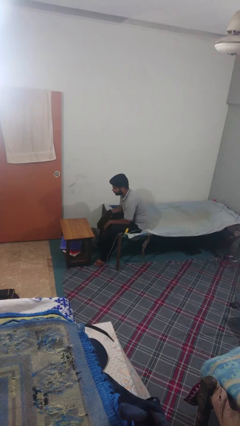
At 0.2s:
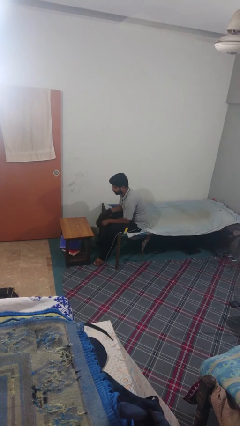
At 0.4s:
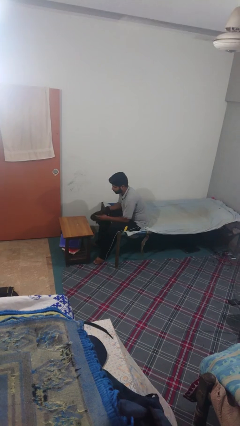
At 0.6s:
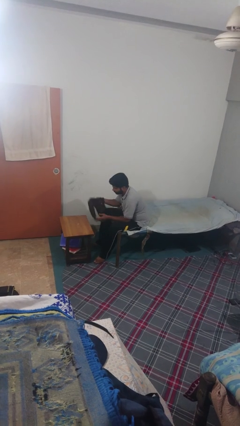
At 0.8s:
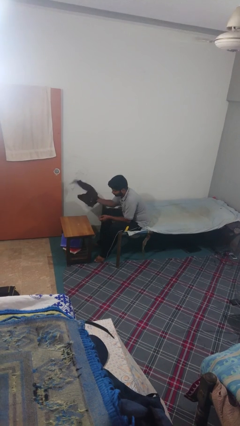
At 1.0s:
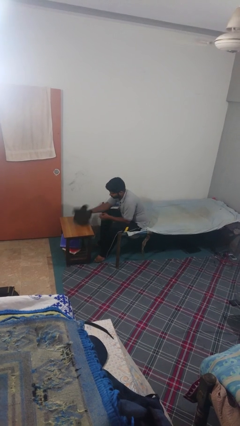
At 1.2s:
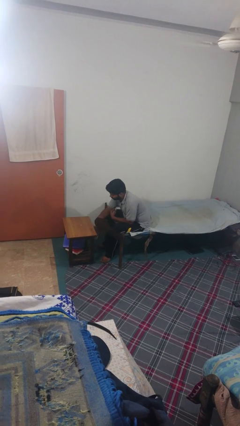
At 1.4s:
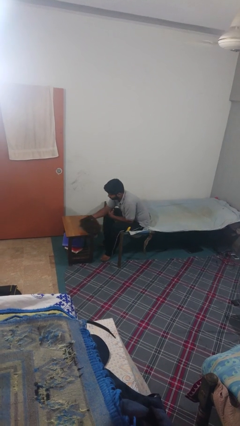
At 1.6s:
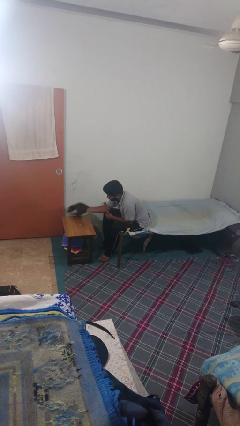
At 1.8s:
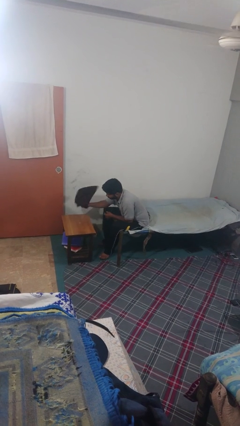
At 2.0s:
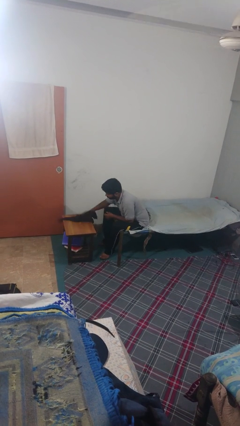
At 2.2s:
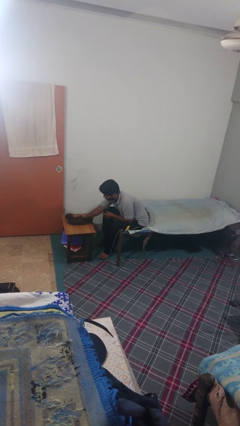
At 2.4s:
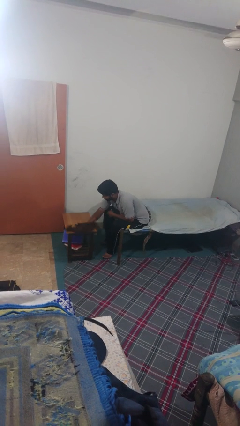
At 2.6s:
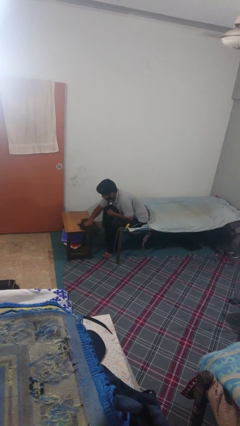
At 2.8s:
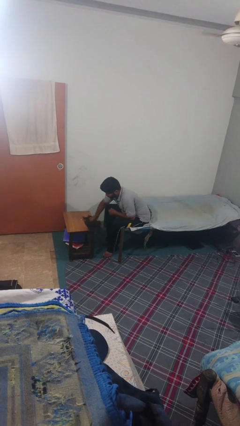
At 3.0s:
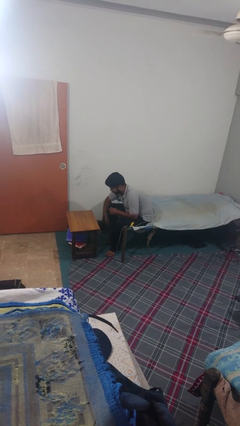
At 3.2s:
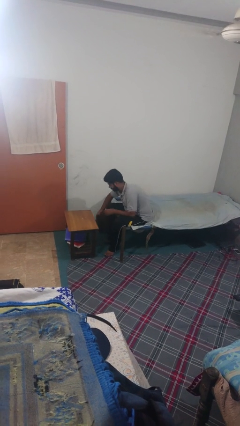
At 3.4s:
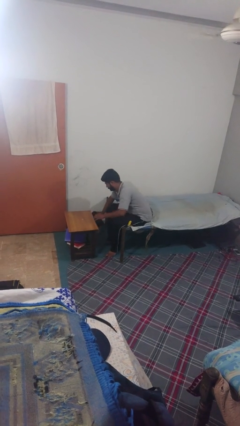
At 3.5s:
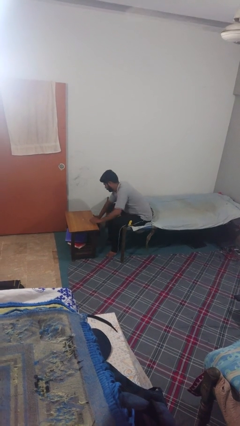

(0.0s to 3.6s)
person dusts furniture

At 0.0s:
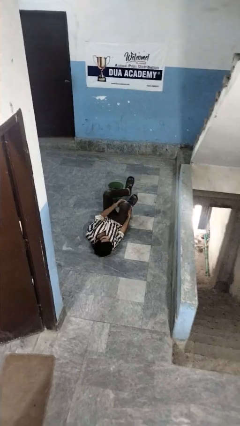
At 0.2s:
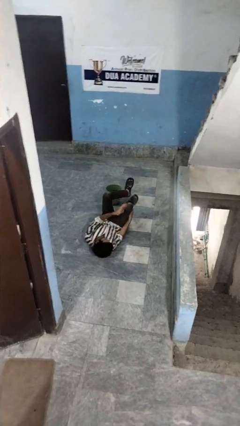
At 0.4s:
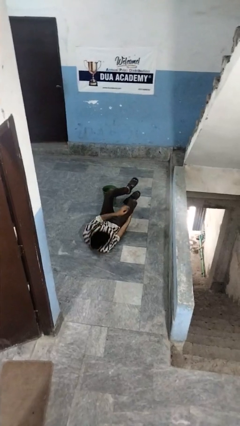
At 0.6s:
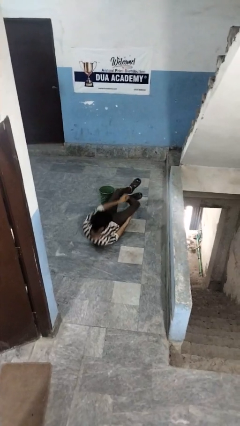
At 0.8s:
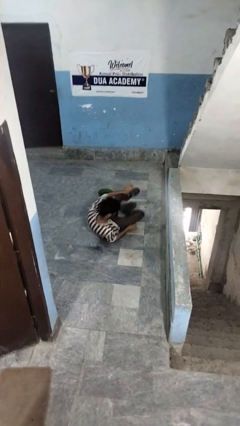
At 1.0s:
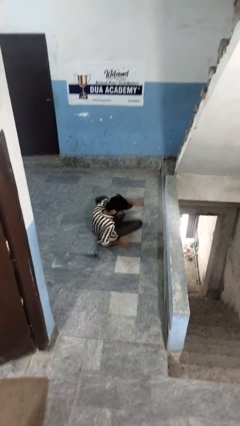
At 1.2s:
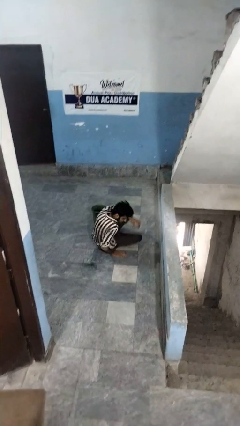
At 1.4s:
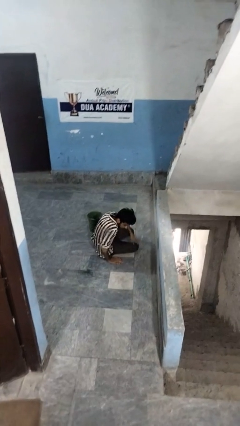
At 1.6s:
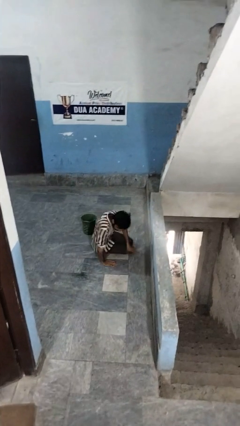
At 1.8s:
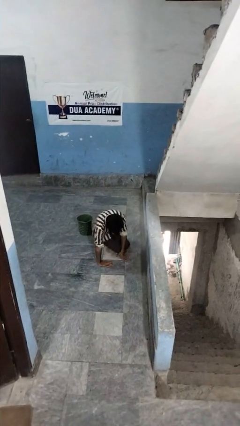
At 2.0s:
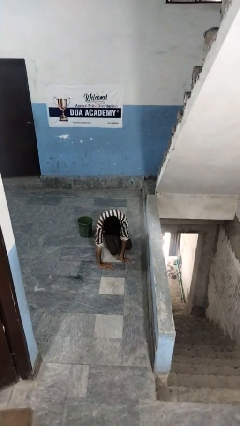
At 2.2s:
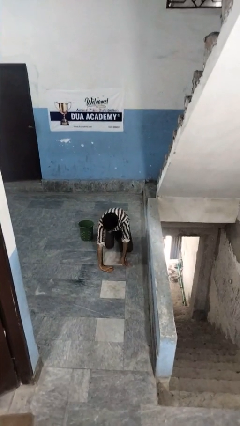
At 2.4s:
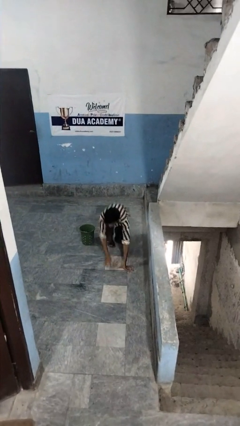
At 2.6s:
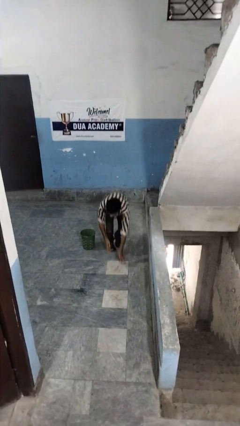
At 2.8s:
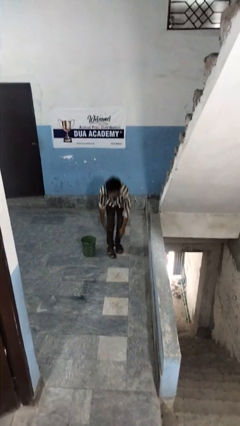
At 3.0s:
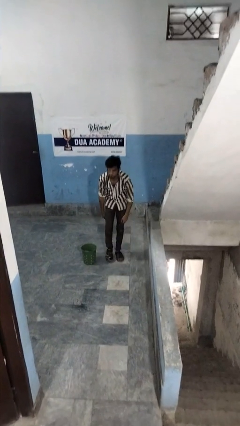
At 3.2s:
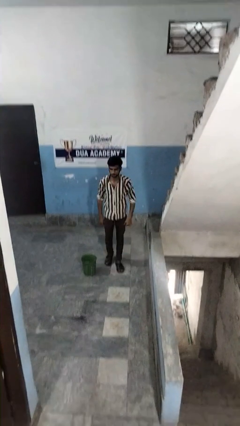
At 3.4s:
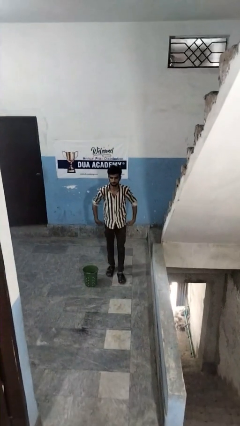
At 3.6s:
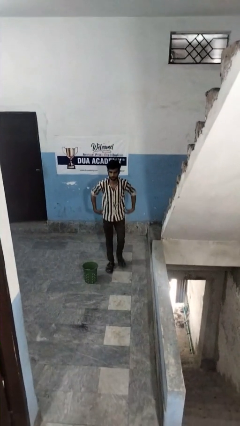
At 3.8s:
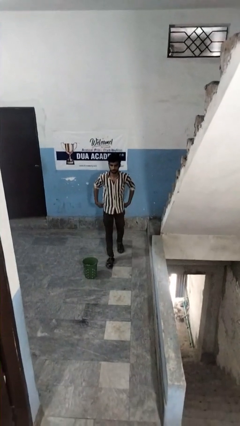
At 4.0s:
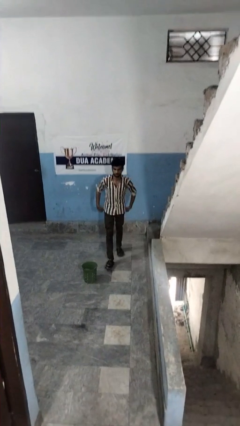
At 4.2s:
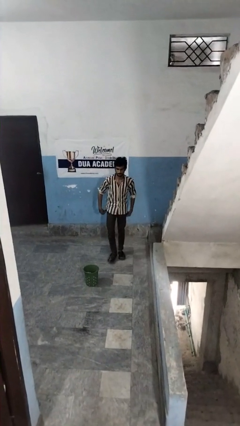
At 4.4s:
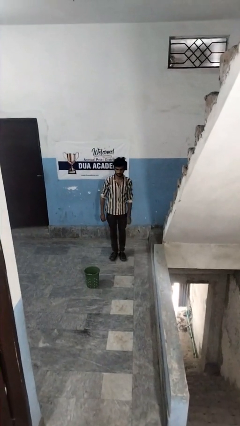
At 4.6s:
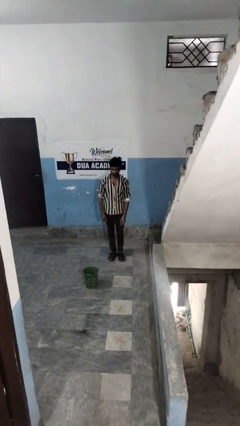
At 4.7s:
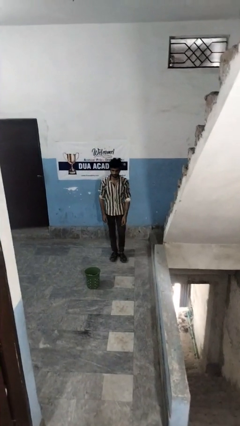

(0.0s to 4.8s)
person stands up from floor

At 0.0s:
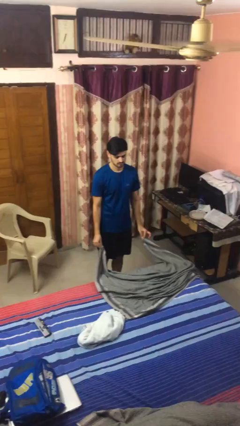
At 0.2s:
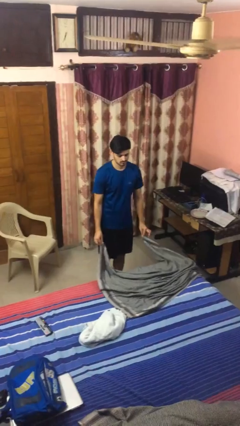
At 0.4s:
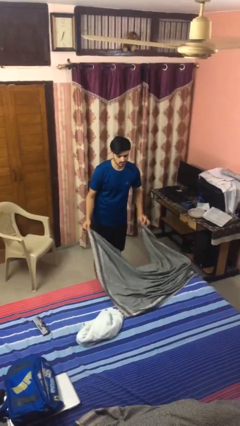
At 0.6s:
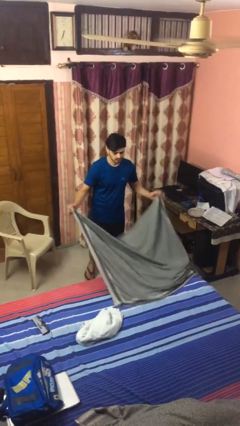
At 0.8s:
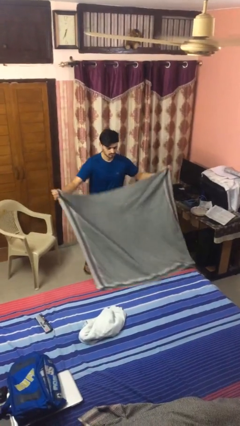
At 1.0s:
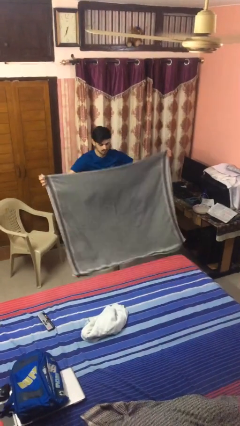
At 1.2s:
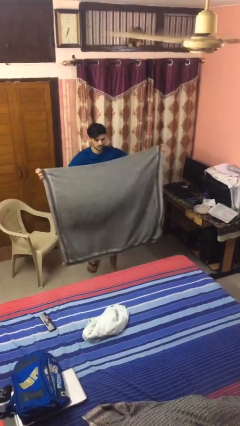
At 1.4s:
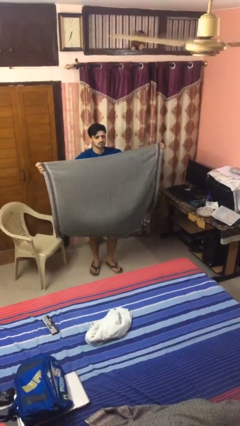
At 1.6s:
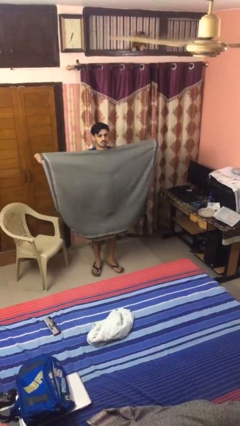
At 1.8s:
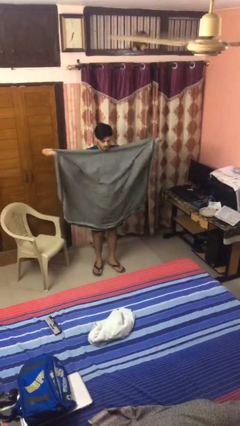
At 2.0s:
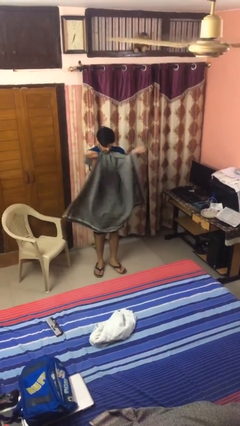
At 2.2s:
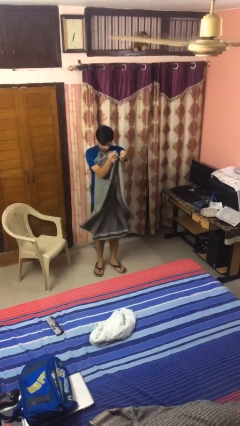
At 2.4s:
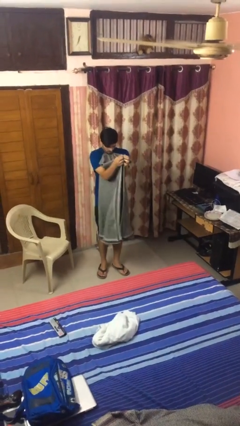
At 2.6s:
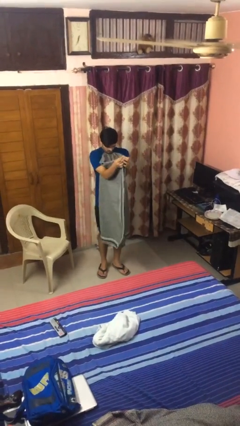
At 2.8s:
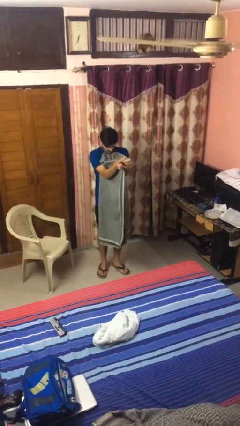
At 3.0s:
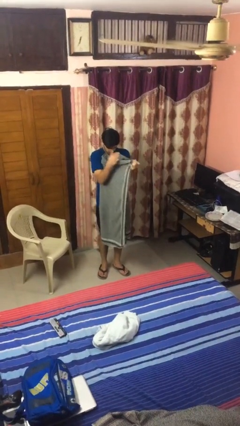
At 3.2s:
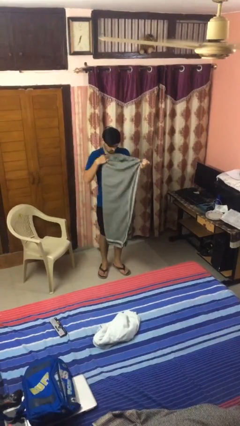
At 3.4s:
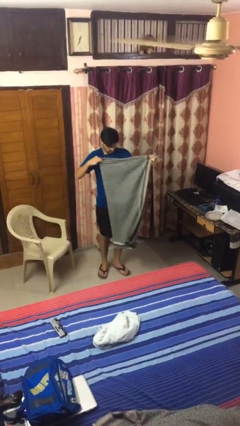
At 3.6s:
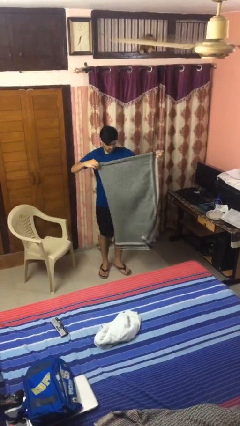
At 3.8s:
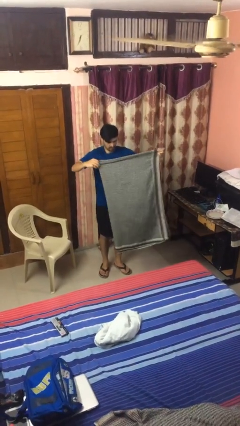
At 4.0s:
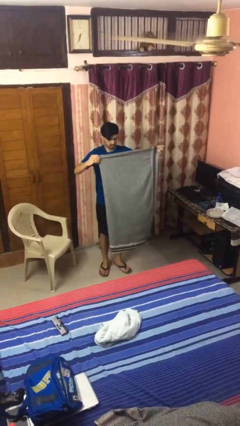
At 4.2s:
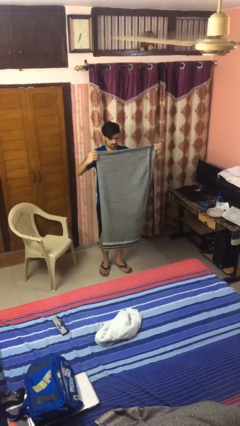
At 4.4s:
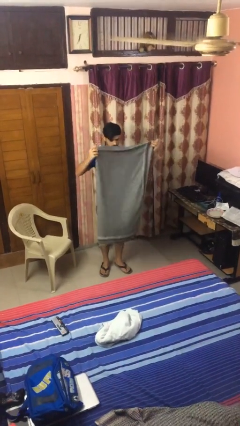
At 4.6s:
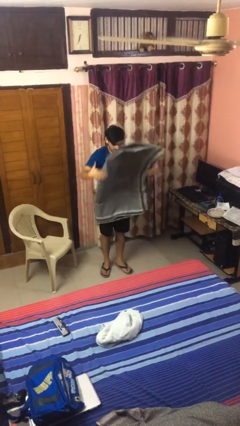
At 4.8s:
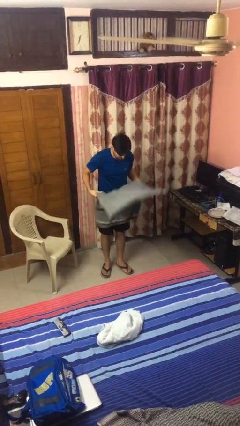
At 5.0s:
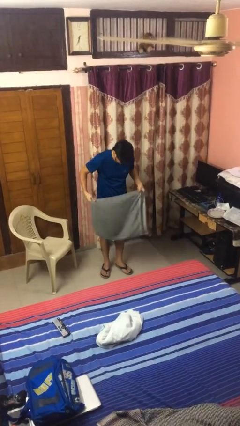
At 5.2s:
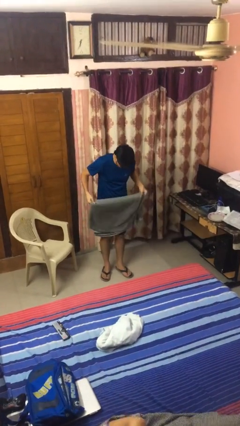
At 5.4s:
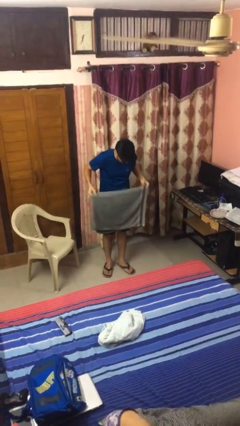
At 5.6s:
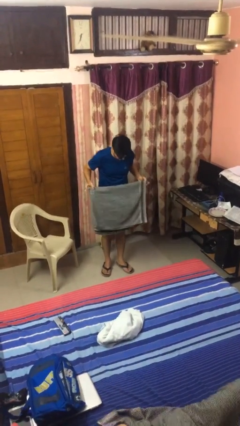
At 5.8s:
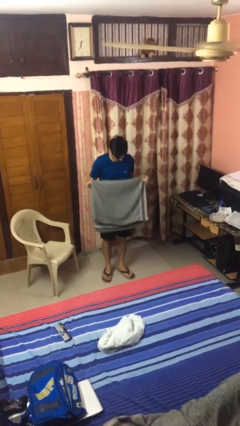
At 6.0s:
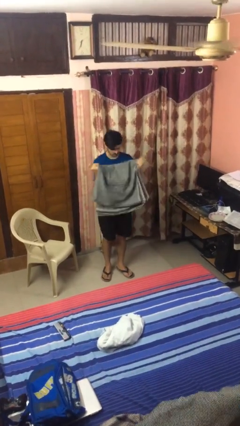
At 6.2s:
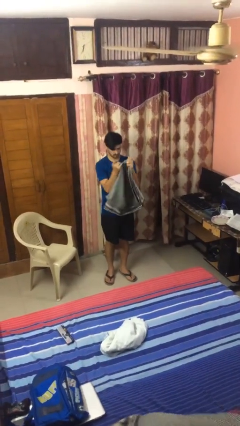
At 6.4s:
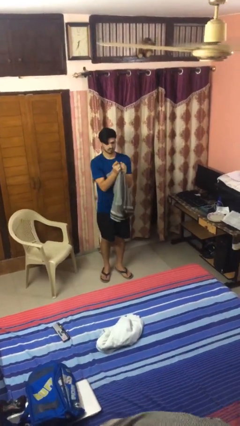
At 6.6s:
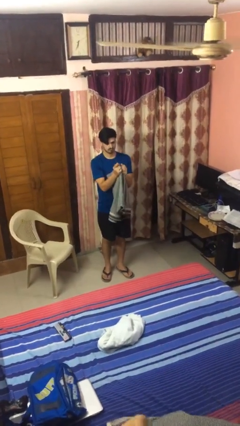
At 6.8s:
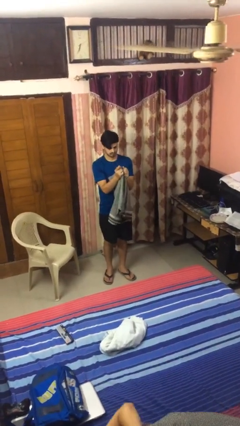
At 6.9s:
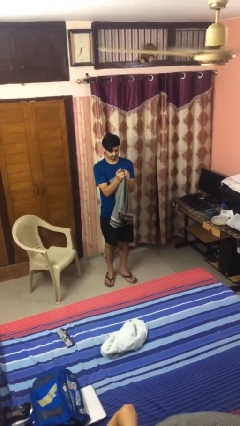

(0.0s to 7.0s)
person folds blanket

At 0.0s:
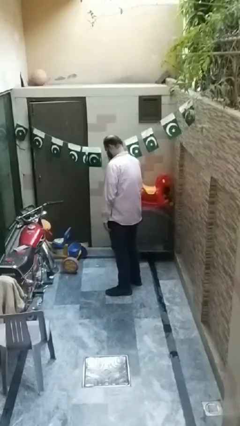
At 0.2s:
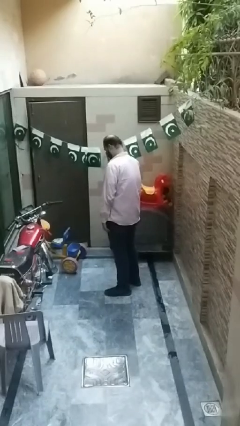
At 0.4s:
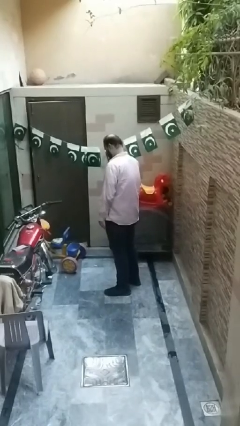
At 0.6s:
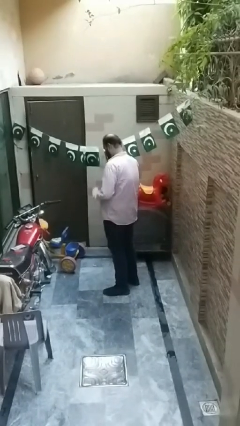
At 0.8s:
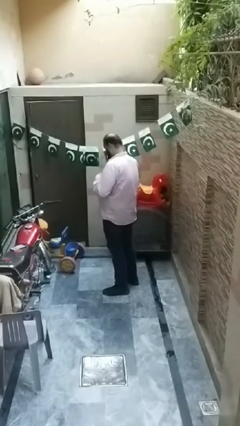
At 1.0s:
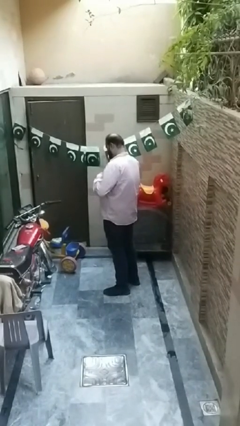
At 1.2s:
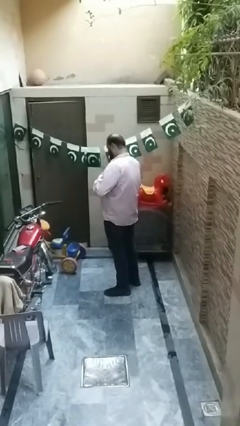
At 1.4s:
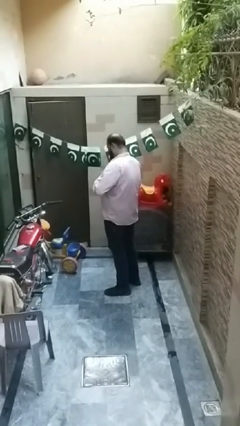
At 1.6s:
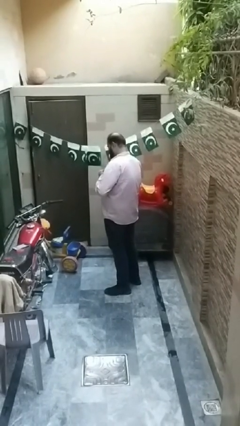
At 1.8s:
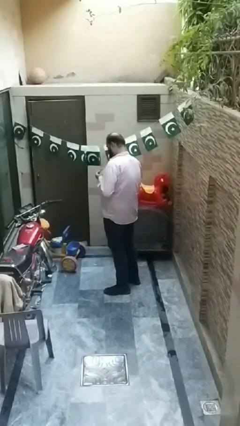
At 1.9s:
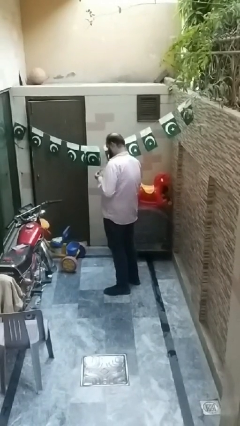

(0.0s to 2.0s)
person unbuttons shirt

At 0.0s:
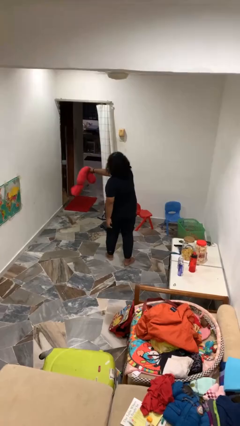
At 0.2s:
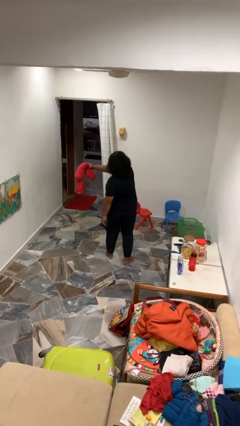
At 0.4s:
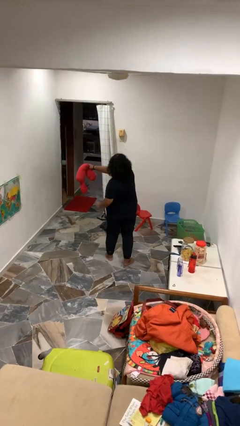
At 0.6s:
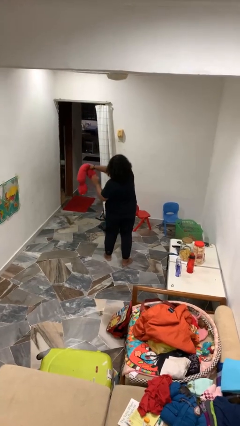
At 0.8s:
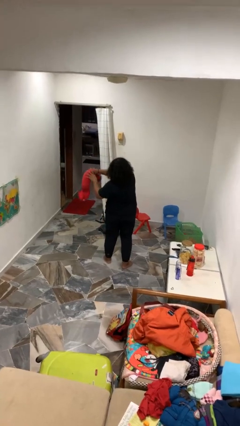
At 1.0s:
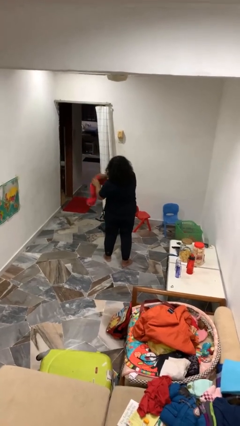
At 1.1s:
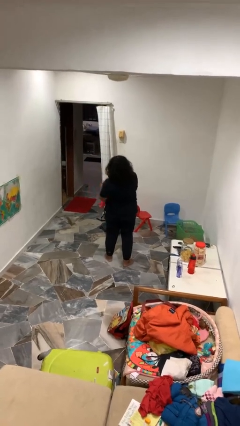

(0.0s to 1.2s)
person catches dropped object
